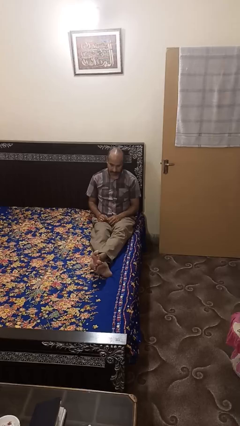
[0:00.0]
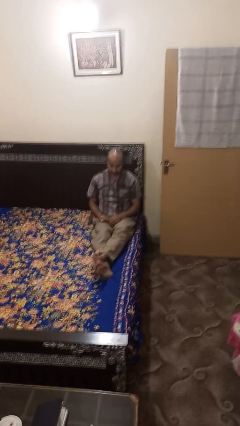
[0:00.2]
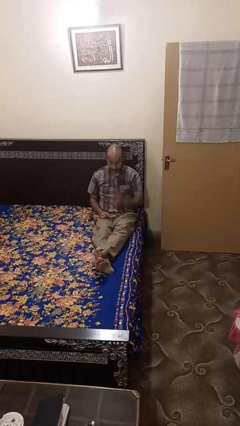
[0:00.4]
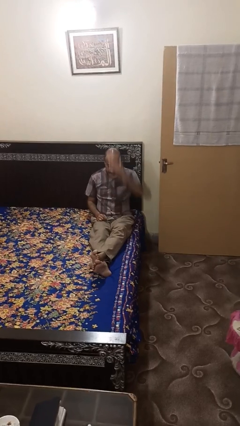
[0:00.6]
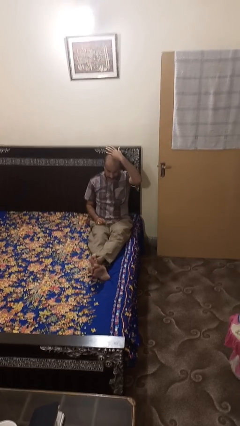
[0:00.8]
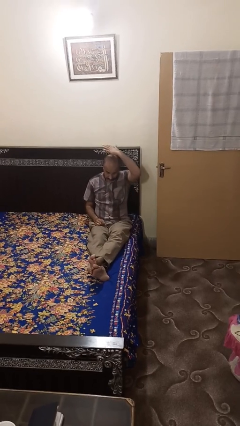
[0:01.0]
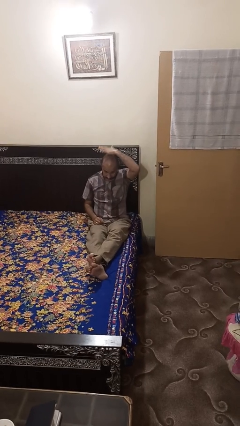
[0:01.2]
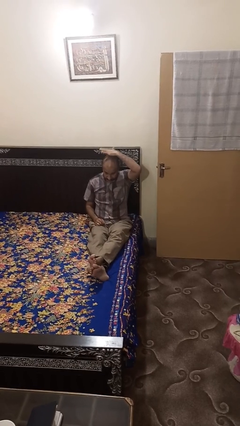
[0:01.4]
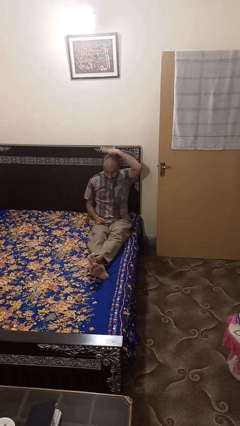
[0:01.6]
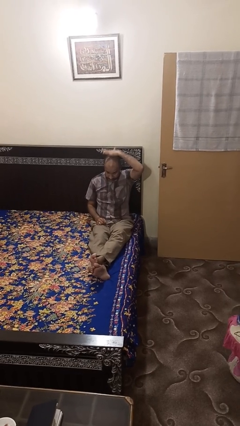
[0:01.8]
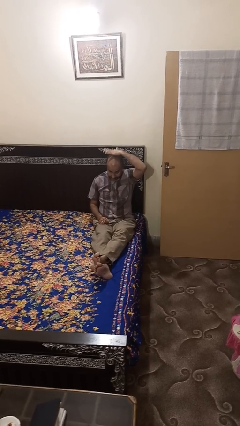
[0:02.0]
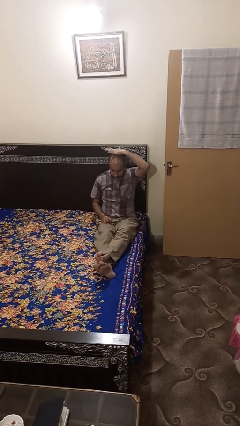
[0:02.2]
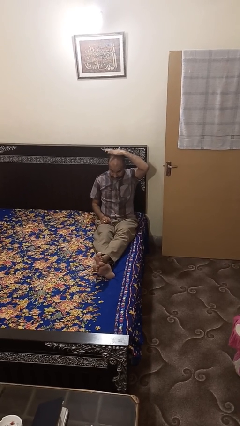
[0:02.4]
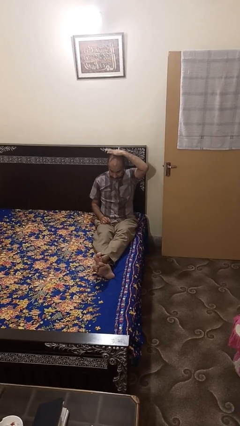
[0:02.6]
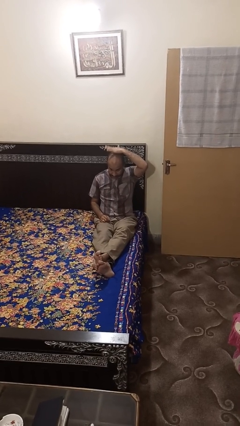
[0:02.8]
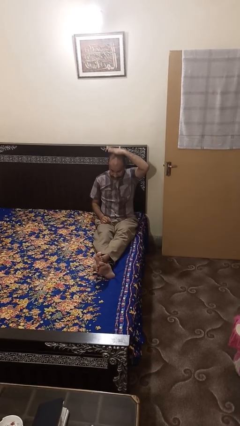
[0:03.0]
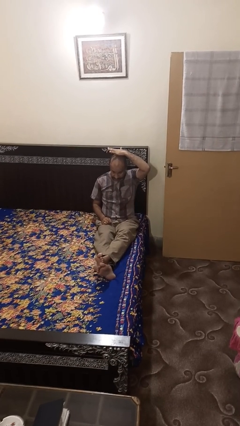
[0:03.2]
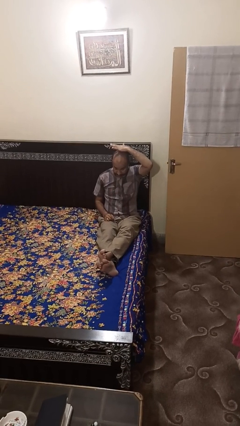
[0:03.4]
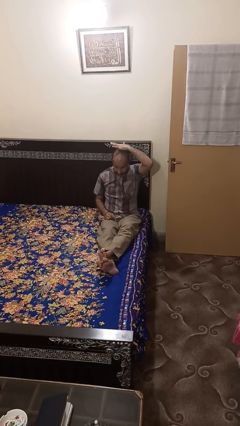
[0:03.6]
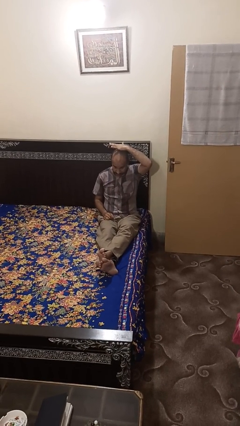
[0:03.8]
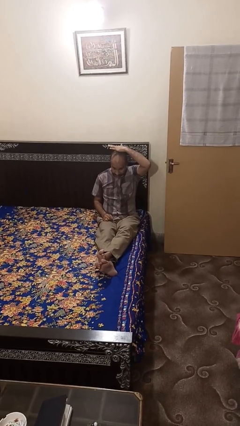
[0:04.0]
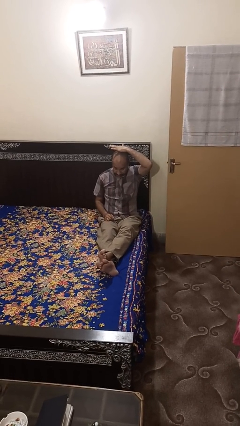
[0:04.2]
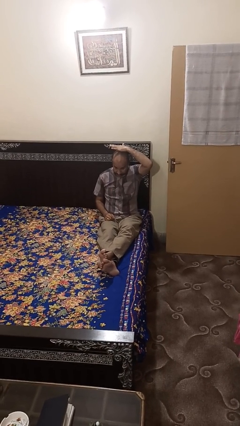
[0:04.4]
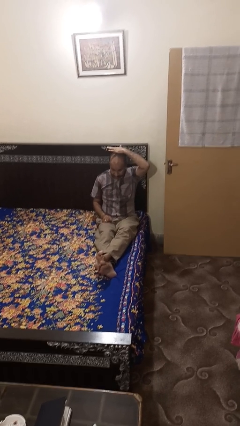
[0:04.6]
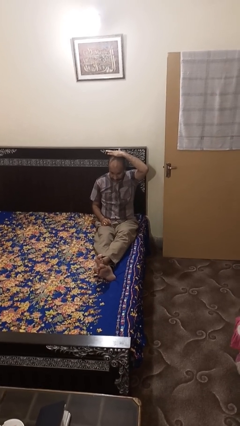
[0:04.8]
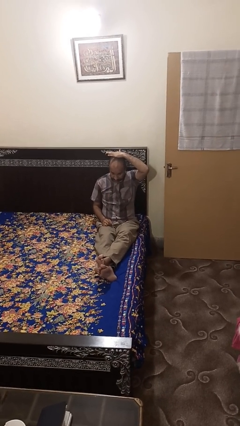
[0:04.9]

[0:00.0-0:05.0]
person pats head

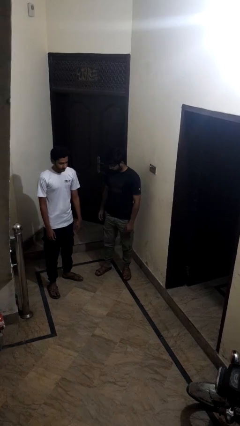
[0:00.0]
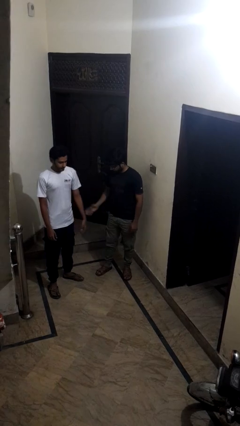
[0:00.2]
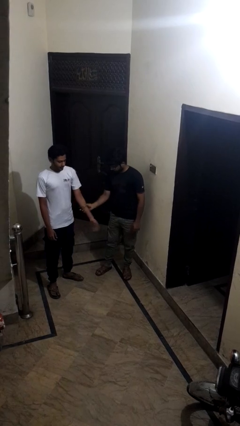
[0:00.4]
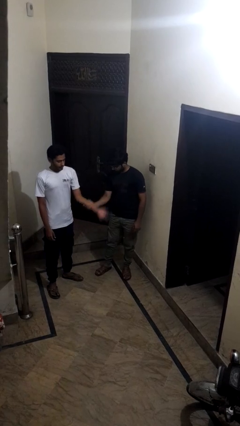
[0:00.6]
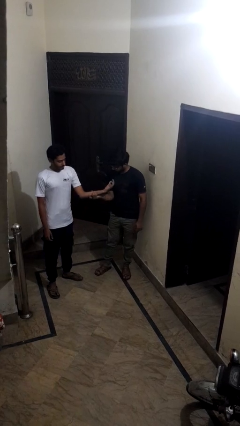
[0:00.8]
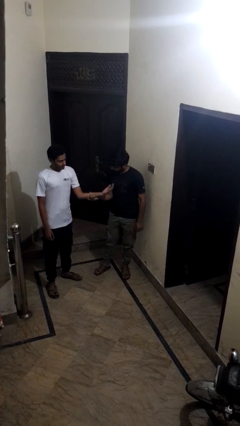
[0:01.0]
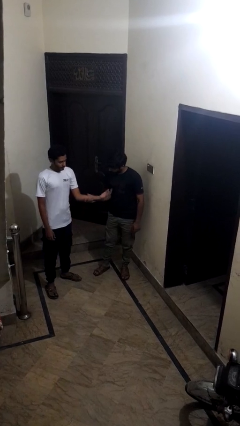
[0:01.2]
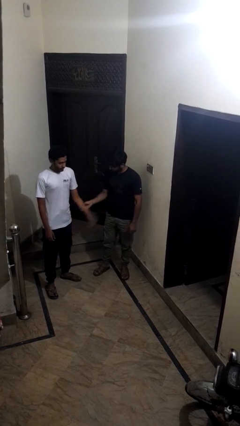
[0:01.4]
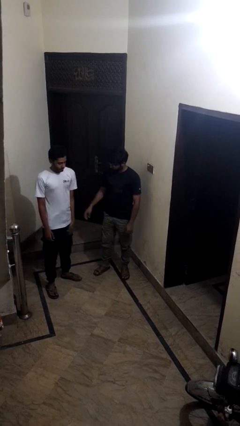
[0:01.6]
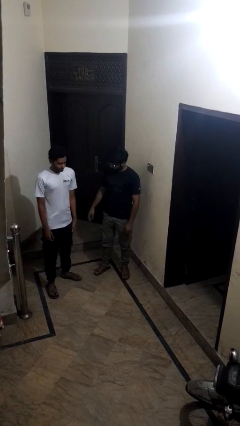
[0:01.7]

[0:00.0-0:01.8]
person grabs person by forearm

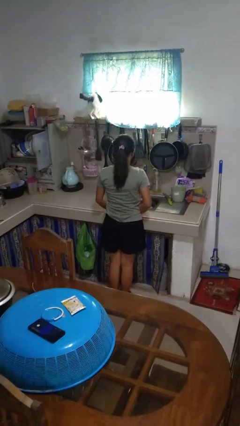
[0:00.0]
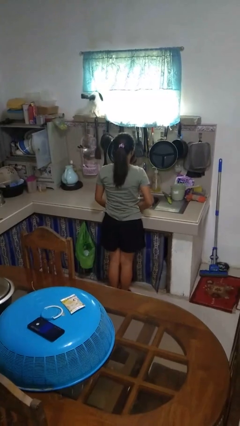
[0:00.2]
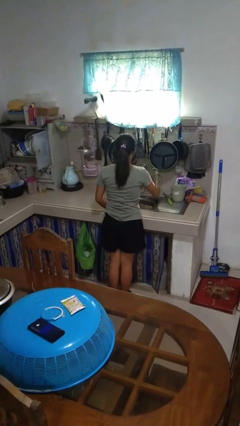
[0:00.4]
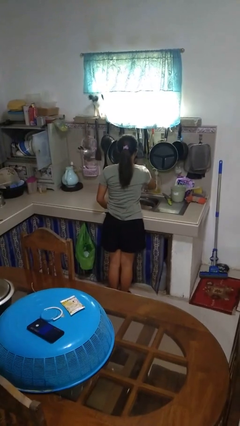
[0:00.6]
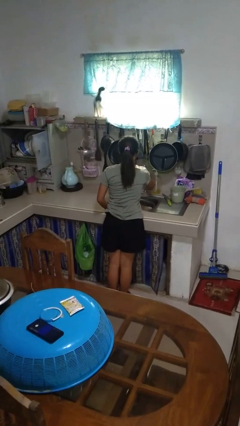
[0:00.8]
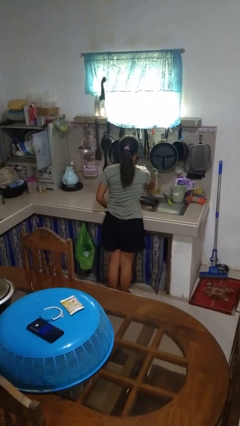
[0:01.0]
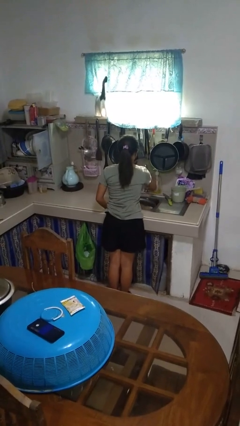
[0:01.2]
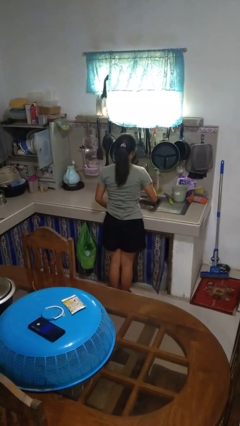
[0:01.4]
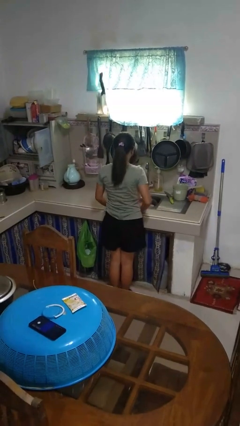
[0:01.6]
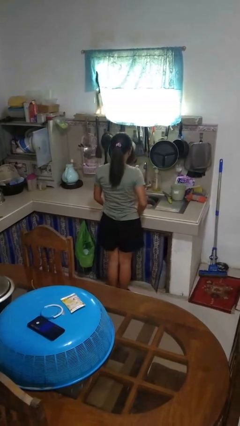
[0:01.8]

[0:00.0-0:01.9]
person turns off faucet

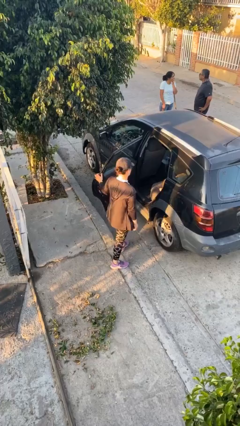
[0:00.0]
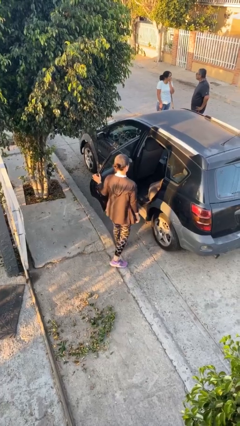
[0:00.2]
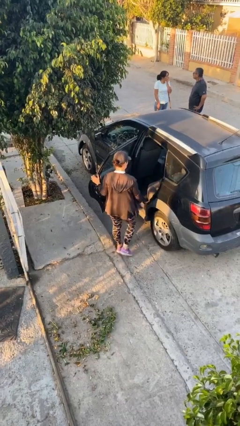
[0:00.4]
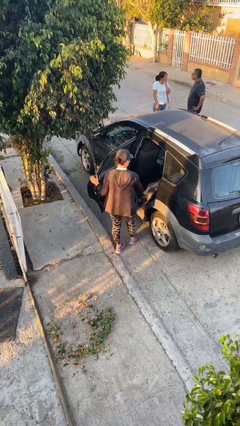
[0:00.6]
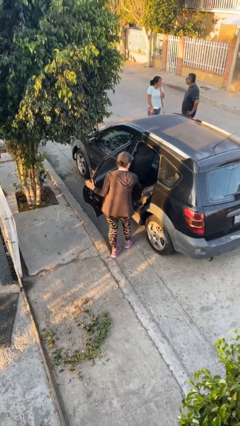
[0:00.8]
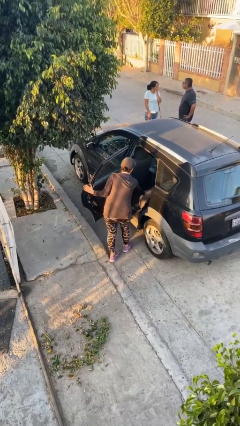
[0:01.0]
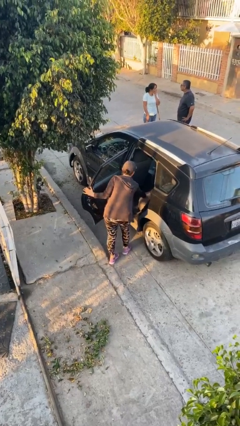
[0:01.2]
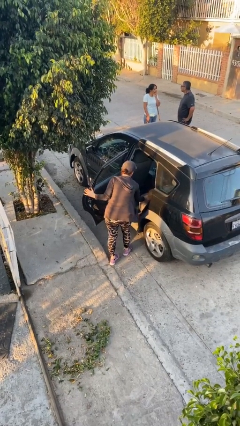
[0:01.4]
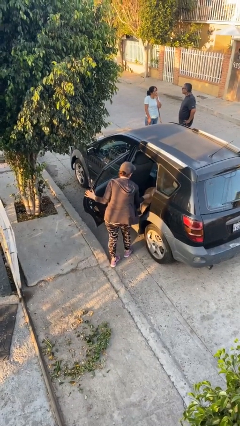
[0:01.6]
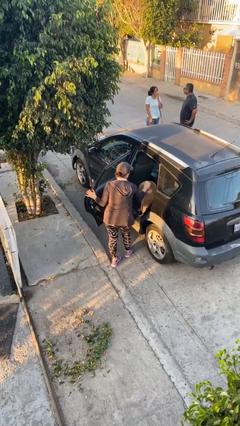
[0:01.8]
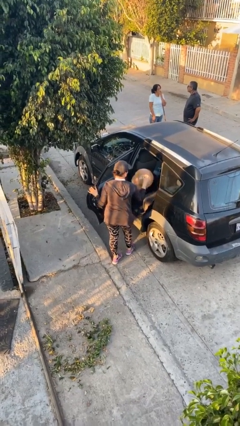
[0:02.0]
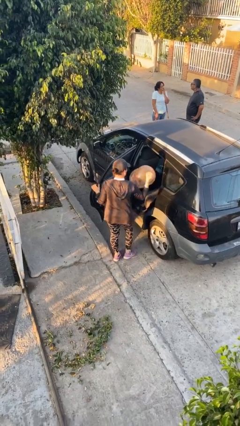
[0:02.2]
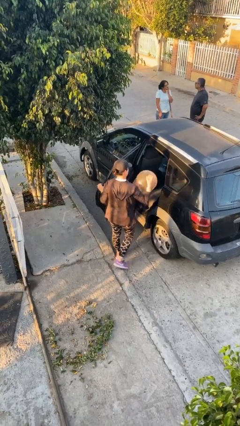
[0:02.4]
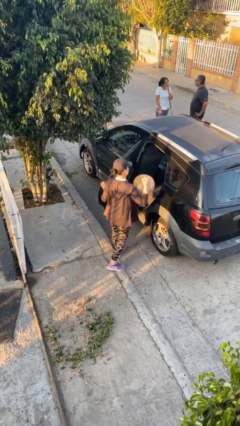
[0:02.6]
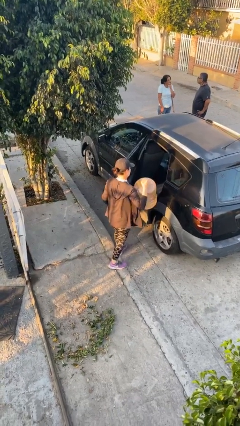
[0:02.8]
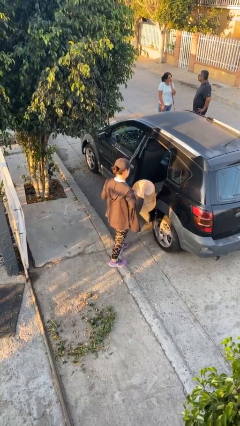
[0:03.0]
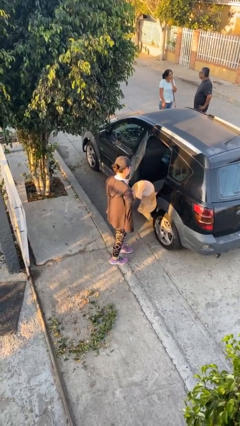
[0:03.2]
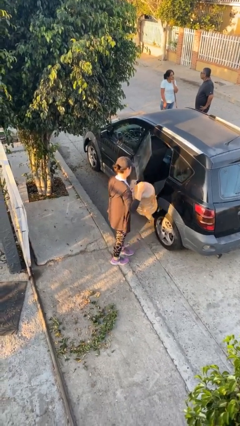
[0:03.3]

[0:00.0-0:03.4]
person unloads car

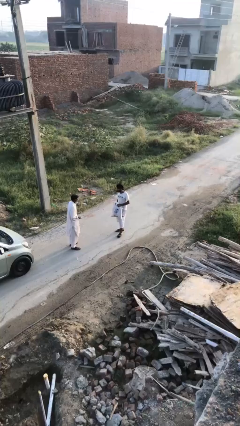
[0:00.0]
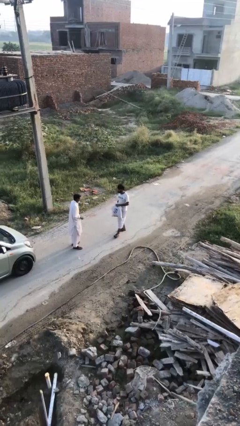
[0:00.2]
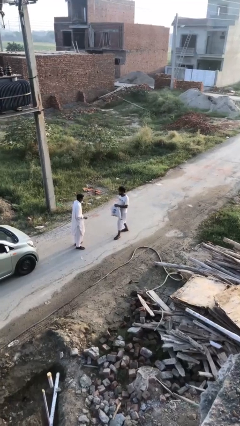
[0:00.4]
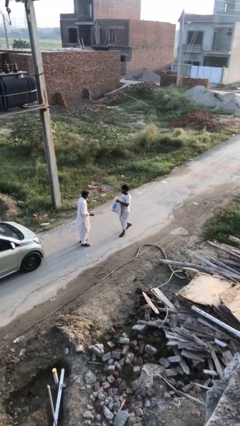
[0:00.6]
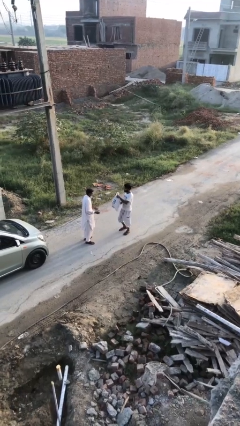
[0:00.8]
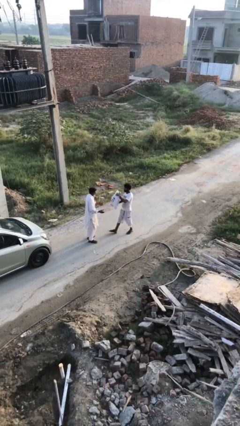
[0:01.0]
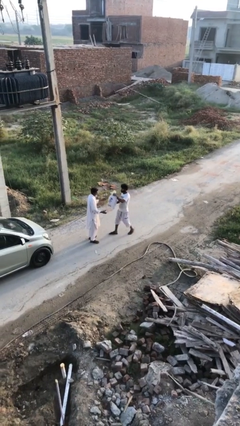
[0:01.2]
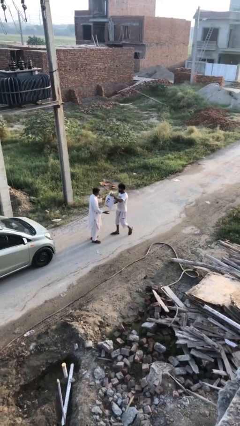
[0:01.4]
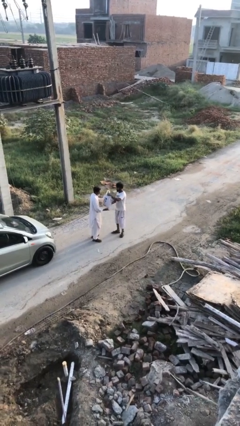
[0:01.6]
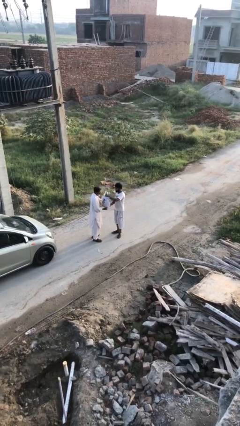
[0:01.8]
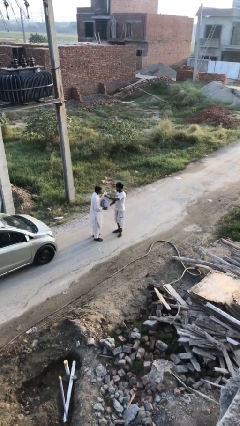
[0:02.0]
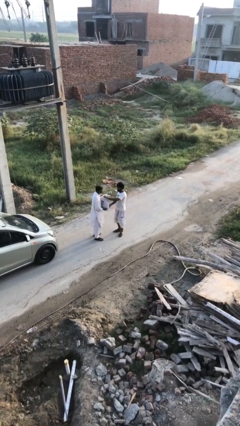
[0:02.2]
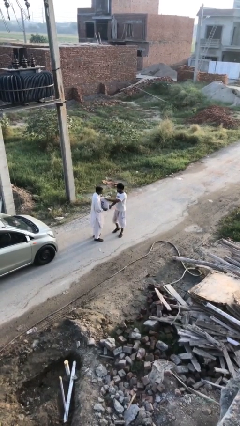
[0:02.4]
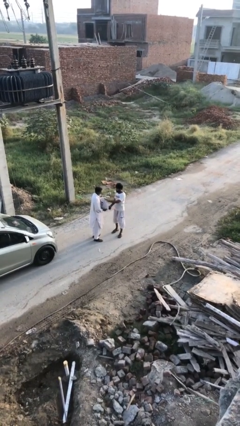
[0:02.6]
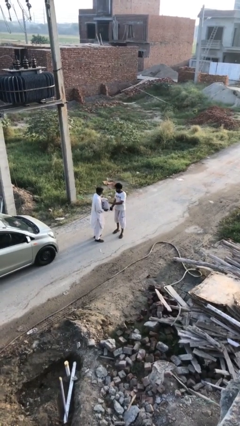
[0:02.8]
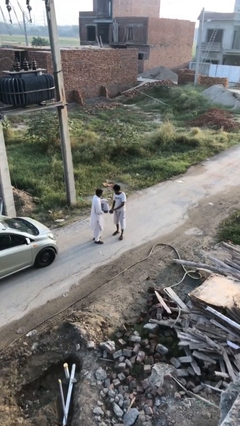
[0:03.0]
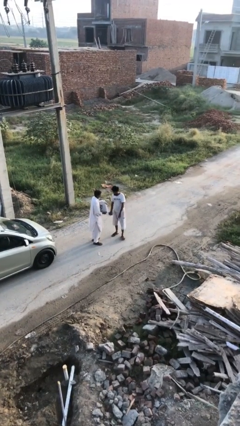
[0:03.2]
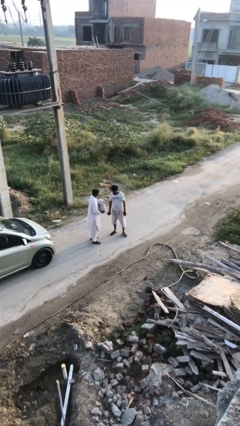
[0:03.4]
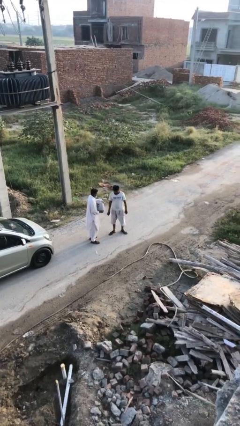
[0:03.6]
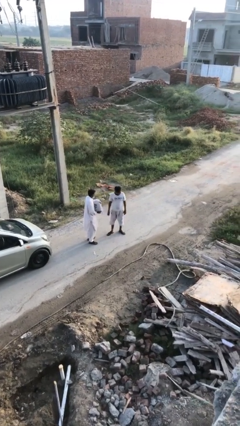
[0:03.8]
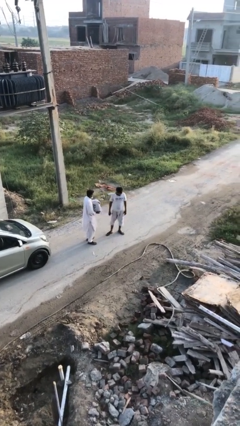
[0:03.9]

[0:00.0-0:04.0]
person transfers object to person

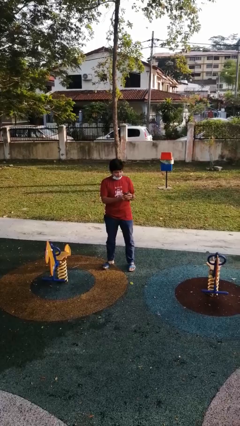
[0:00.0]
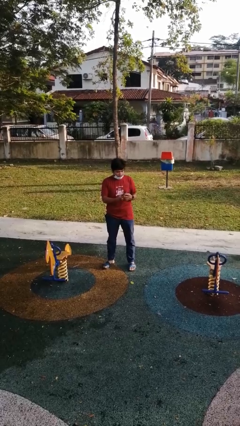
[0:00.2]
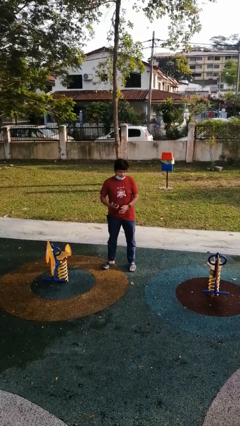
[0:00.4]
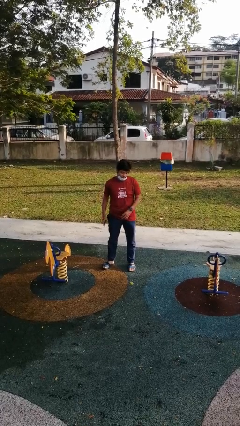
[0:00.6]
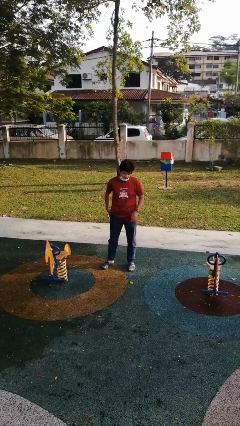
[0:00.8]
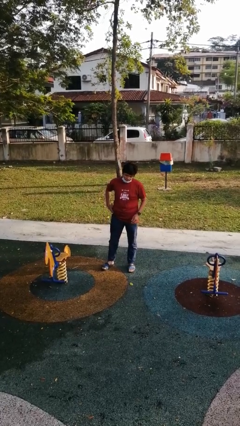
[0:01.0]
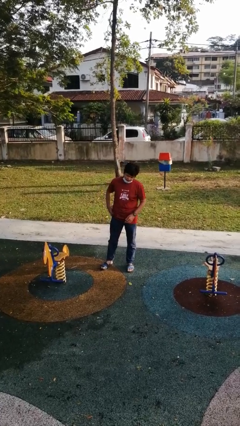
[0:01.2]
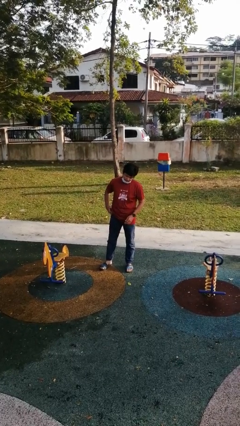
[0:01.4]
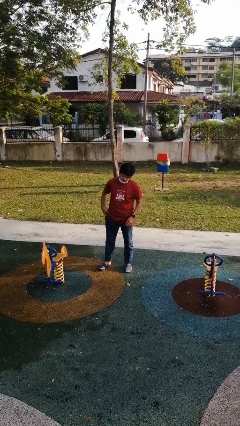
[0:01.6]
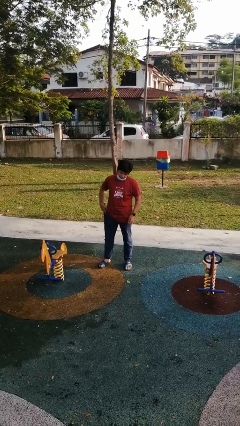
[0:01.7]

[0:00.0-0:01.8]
person puts phone into pocket
